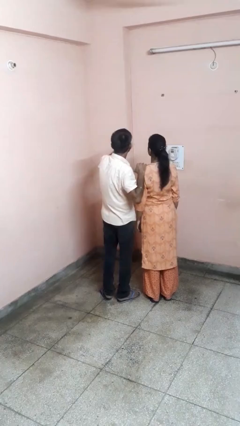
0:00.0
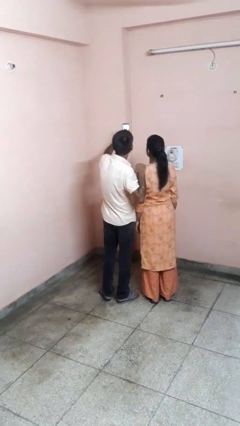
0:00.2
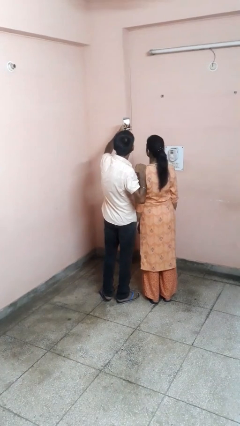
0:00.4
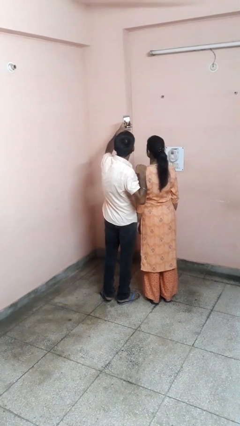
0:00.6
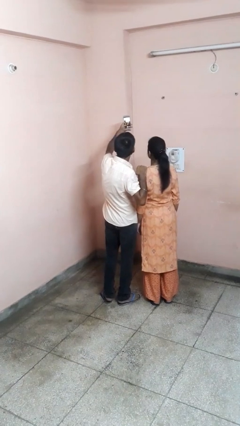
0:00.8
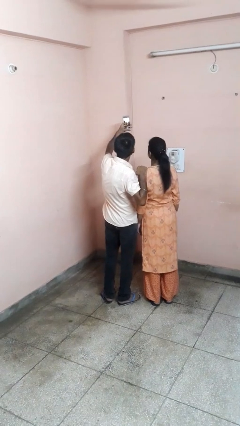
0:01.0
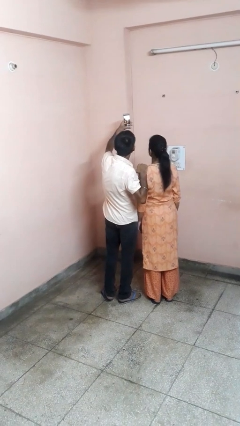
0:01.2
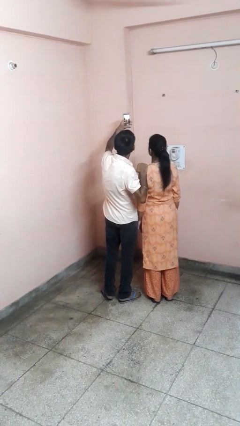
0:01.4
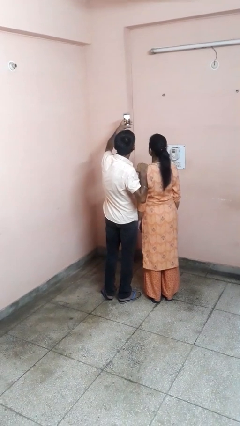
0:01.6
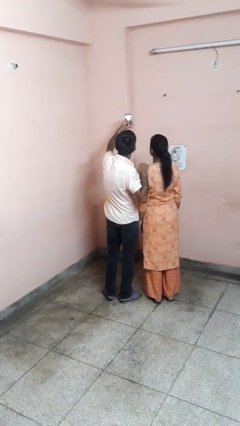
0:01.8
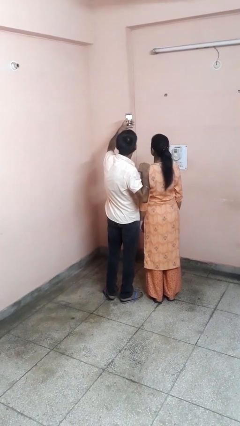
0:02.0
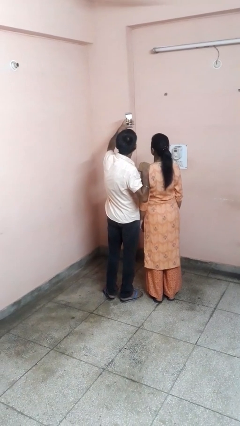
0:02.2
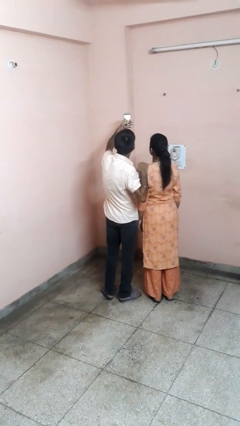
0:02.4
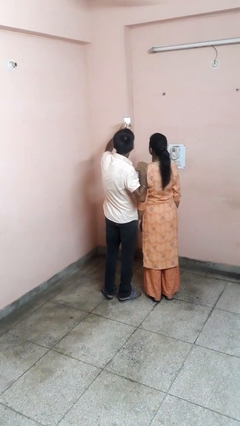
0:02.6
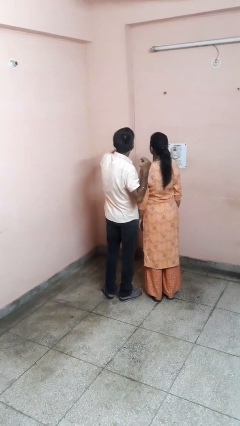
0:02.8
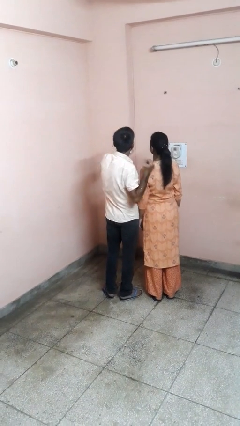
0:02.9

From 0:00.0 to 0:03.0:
person takes selfie with person

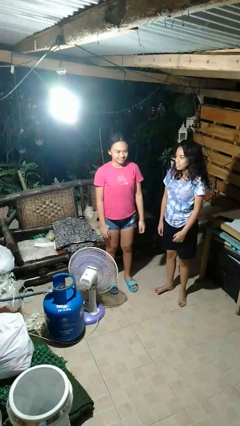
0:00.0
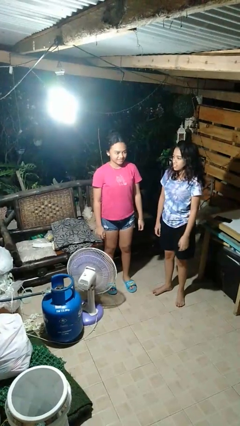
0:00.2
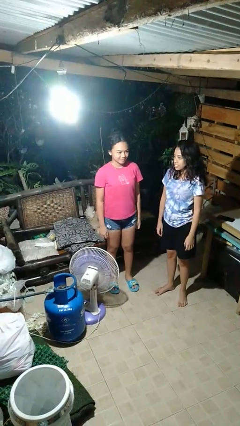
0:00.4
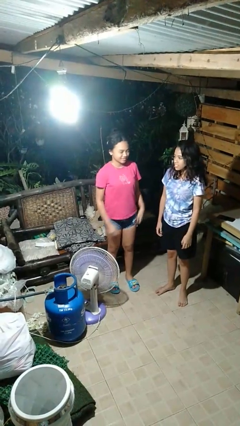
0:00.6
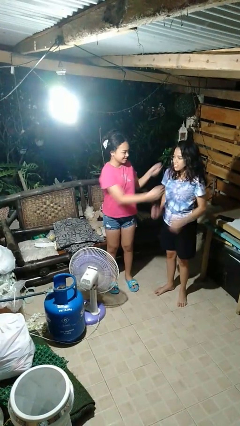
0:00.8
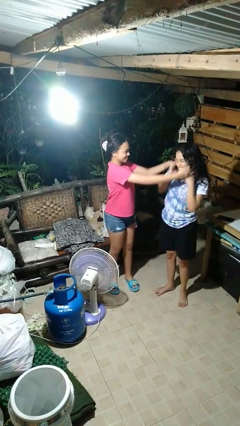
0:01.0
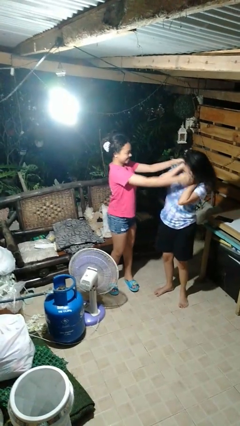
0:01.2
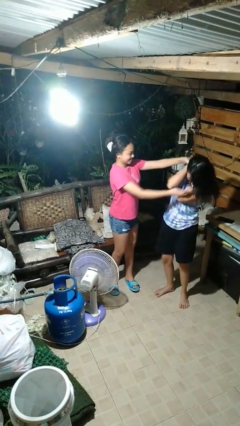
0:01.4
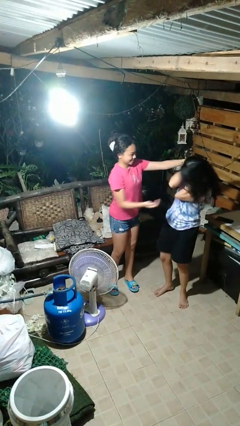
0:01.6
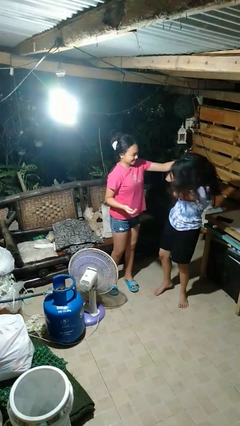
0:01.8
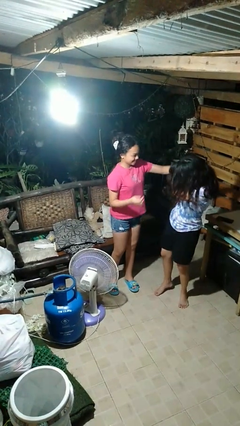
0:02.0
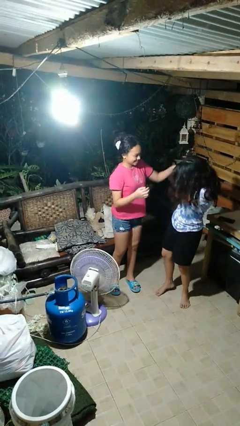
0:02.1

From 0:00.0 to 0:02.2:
person tickles person

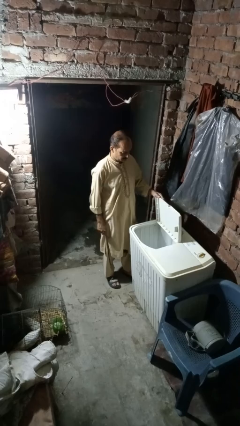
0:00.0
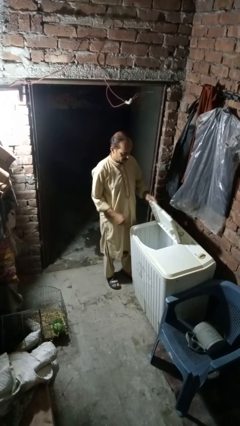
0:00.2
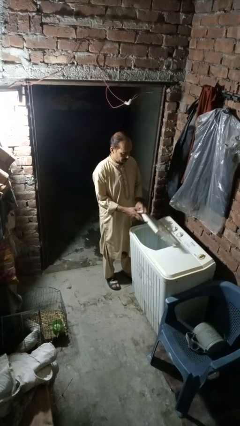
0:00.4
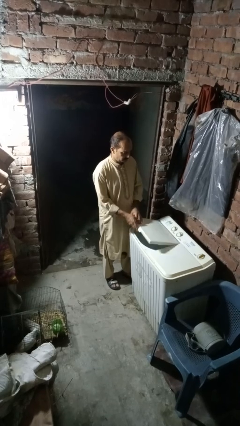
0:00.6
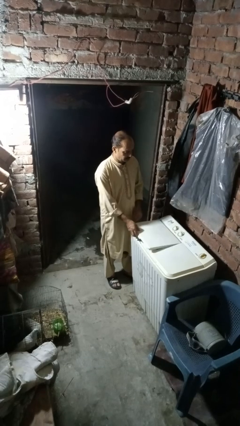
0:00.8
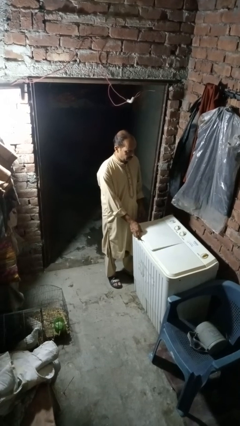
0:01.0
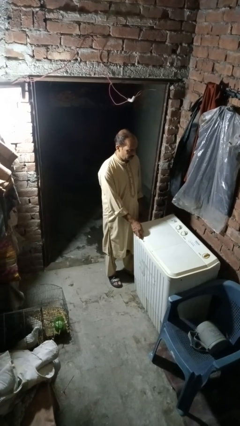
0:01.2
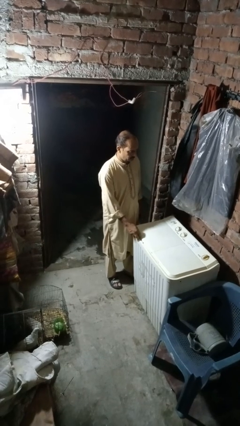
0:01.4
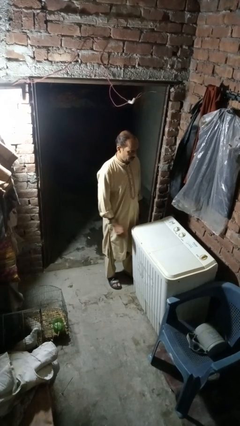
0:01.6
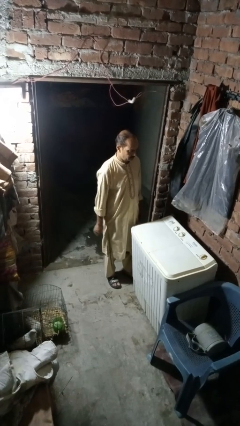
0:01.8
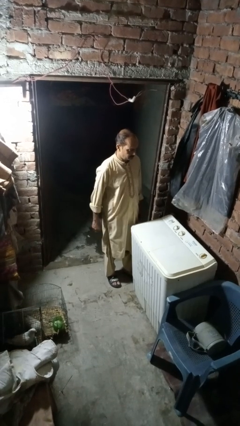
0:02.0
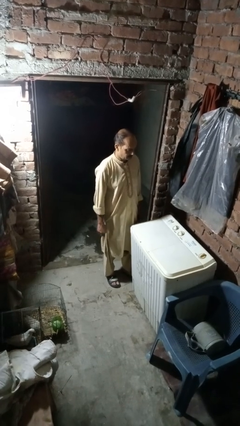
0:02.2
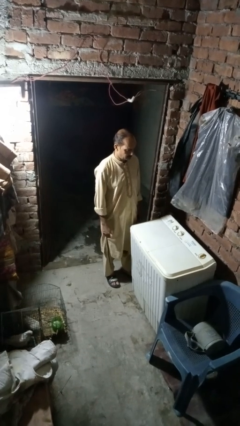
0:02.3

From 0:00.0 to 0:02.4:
person closes clothes washer

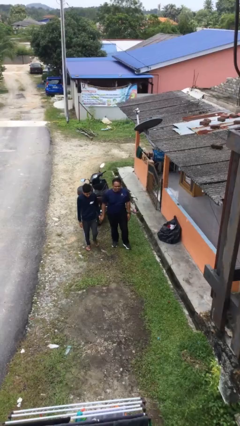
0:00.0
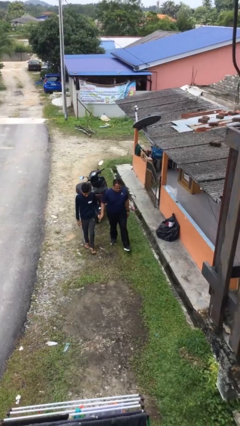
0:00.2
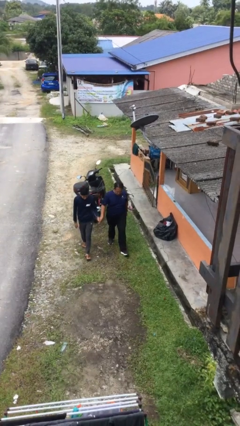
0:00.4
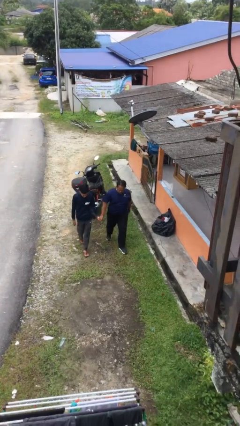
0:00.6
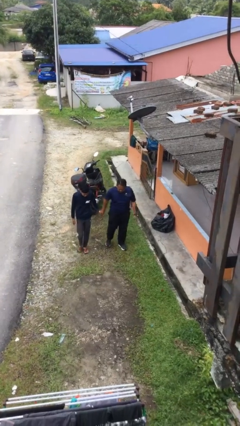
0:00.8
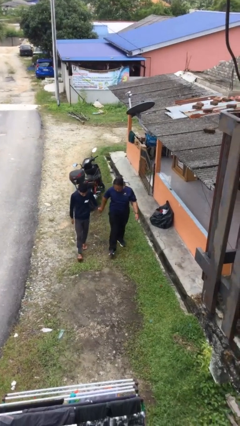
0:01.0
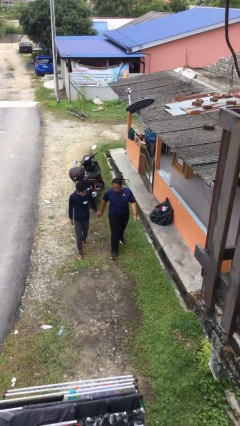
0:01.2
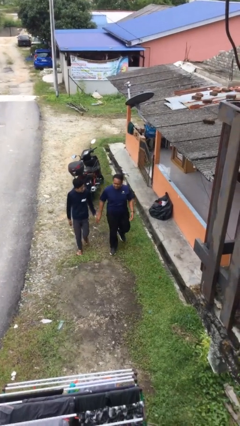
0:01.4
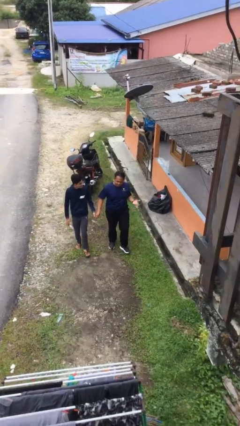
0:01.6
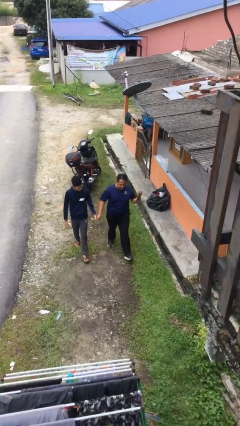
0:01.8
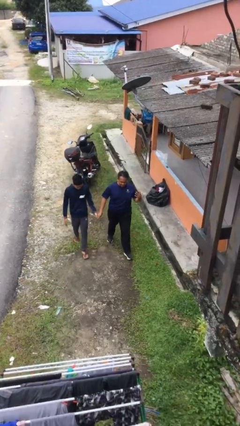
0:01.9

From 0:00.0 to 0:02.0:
person holds hand

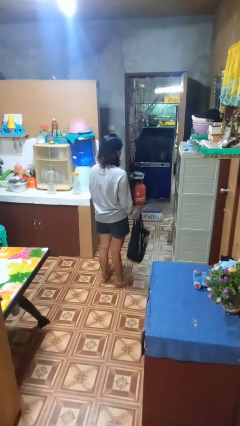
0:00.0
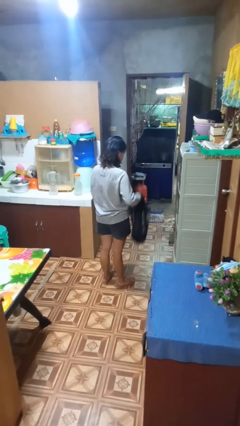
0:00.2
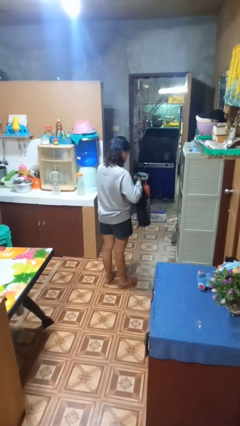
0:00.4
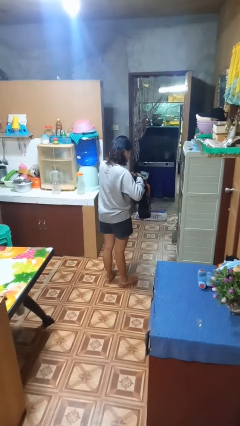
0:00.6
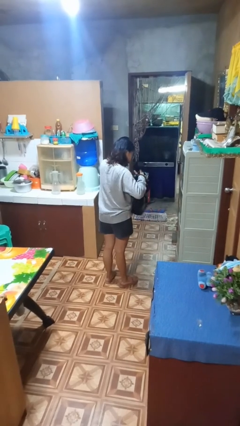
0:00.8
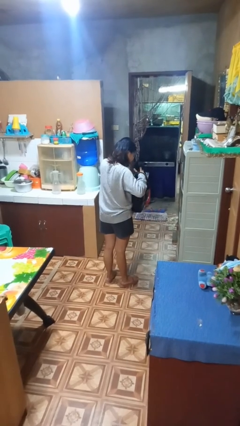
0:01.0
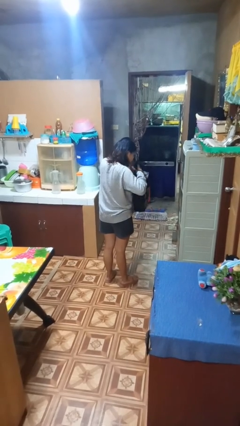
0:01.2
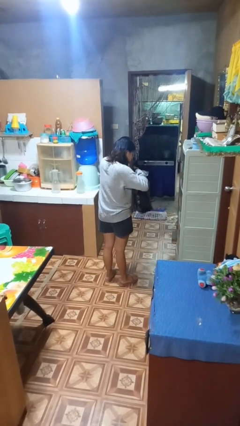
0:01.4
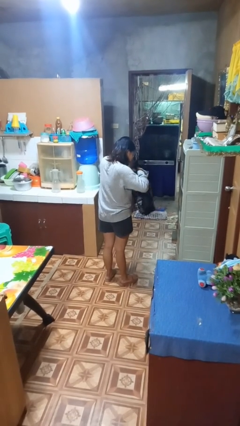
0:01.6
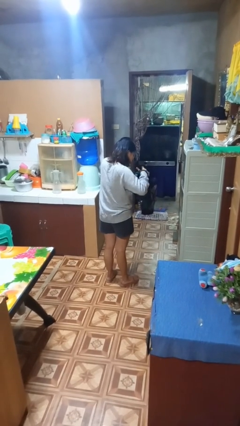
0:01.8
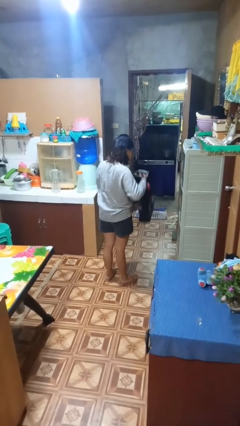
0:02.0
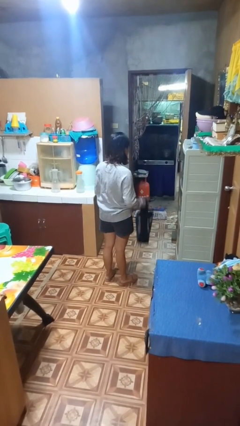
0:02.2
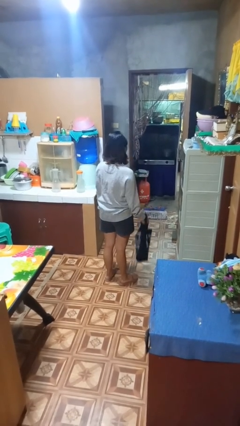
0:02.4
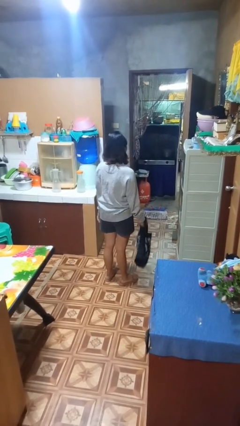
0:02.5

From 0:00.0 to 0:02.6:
person searches in bag

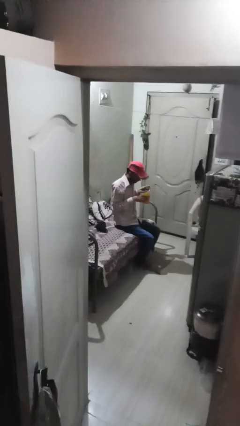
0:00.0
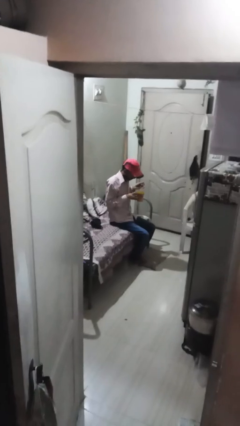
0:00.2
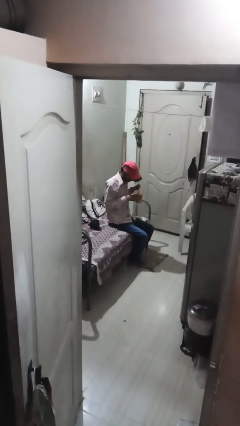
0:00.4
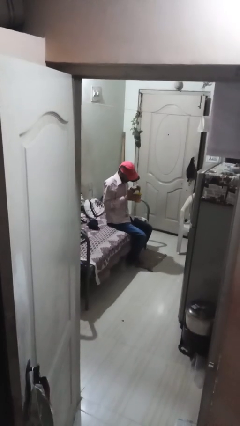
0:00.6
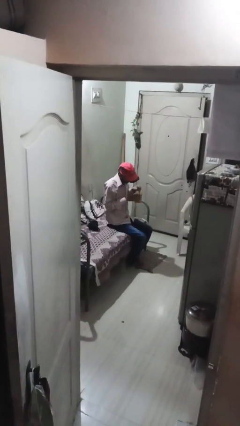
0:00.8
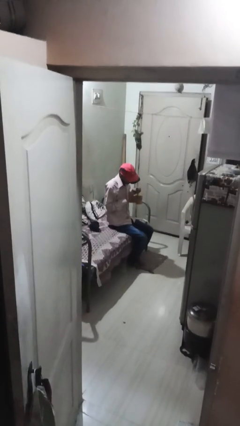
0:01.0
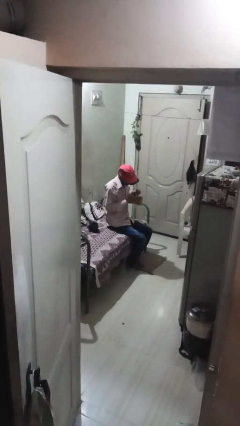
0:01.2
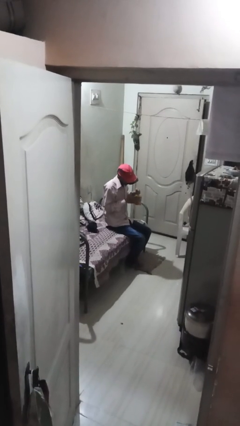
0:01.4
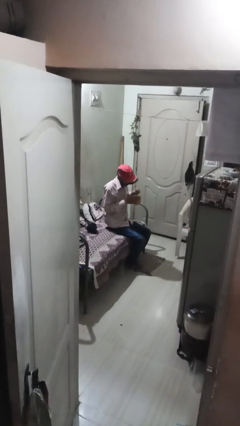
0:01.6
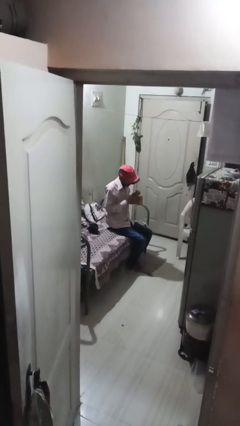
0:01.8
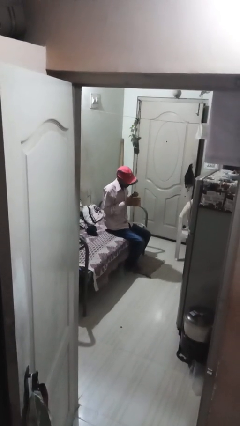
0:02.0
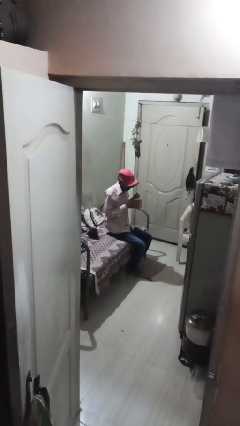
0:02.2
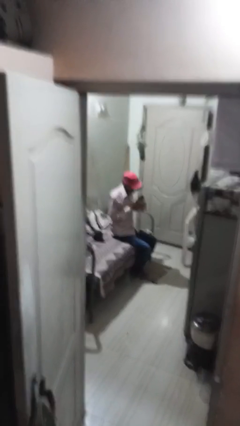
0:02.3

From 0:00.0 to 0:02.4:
person stirs mug

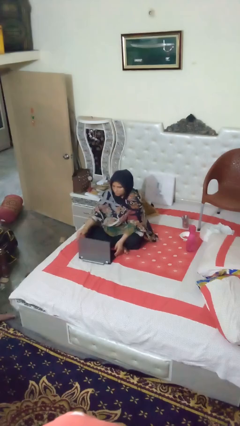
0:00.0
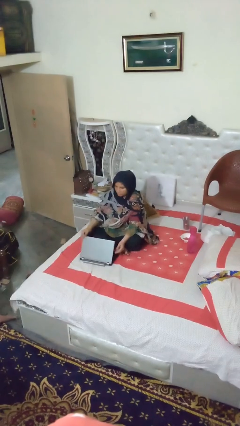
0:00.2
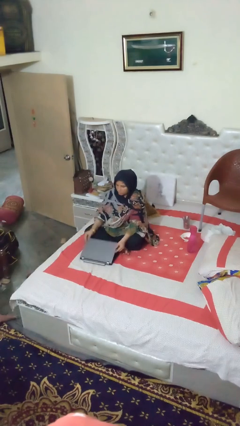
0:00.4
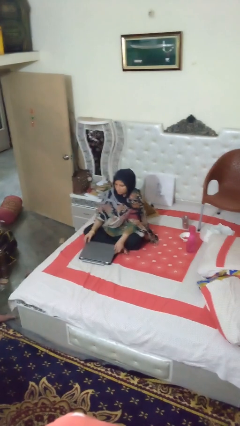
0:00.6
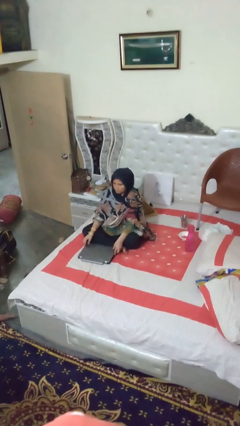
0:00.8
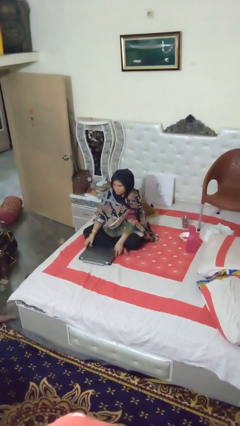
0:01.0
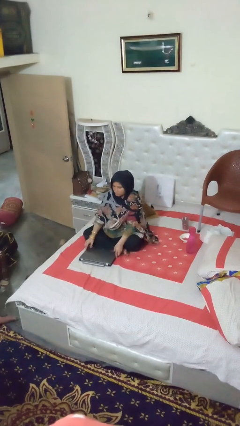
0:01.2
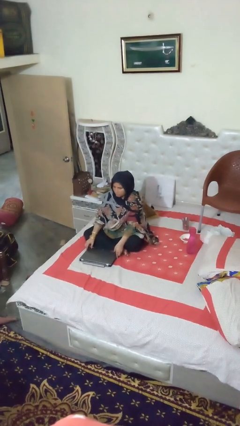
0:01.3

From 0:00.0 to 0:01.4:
person closes laptop

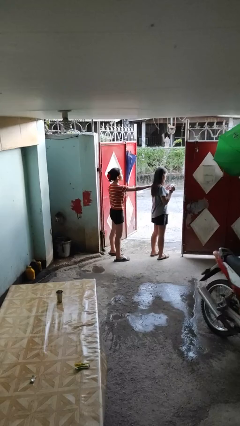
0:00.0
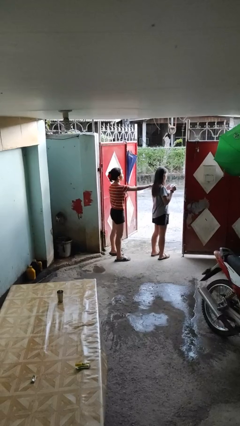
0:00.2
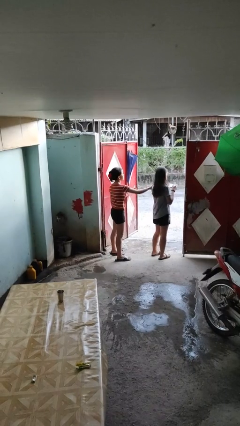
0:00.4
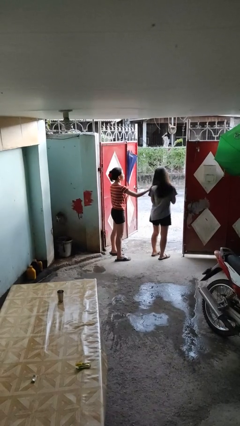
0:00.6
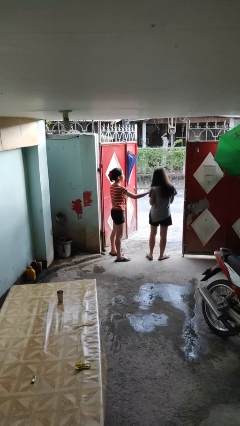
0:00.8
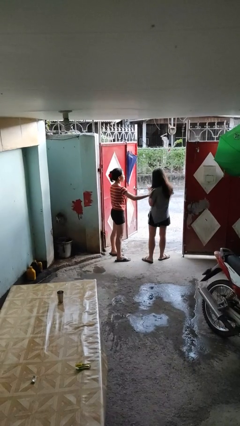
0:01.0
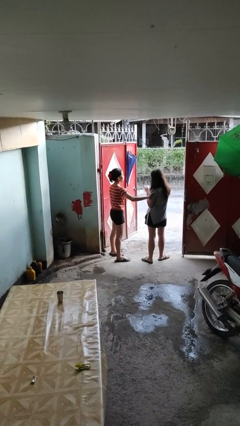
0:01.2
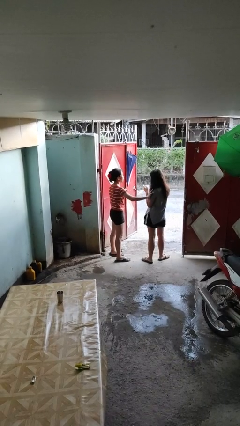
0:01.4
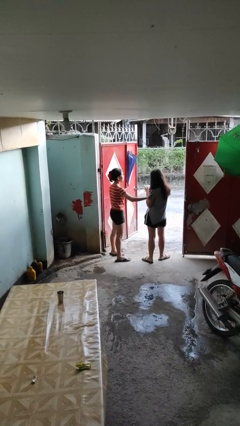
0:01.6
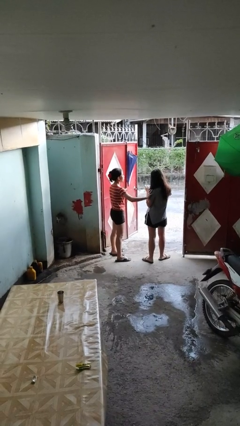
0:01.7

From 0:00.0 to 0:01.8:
person spins person around
